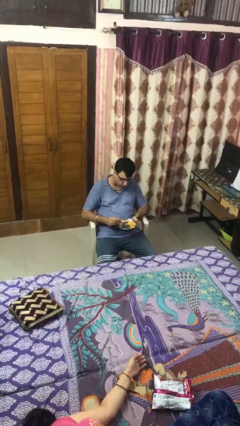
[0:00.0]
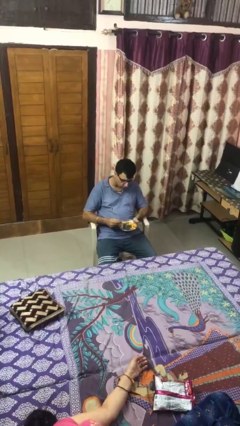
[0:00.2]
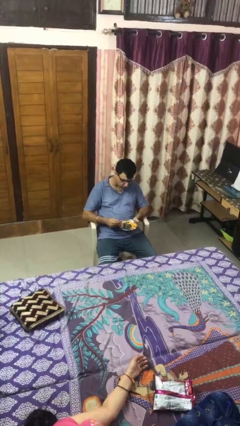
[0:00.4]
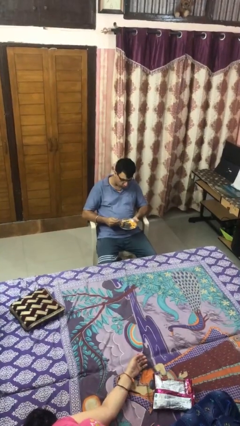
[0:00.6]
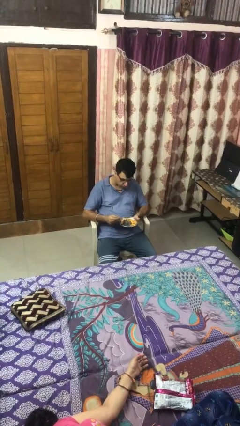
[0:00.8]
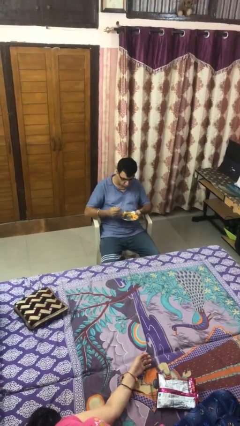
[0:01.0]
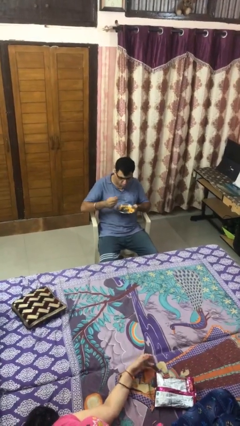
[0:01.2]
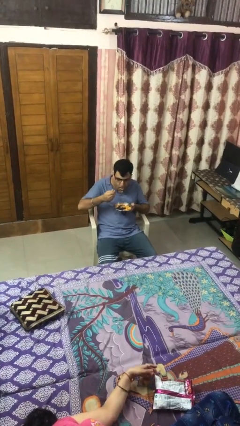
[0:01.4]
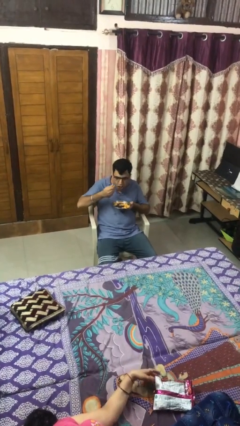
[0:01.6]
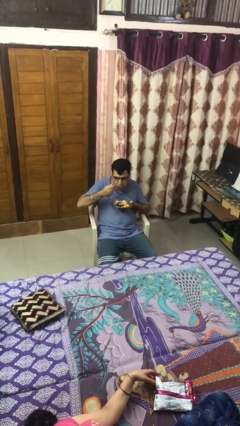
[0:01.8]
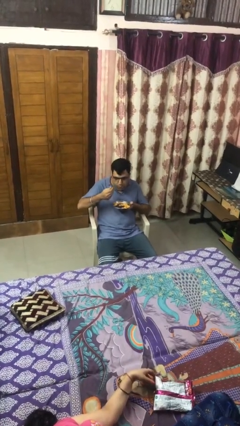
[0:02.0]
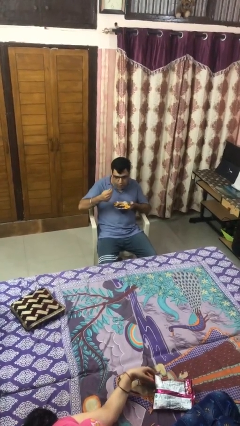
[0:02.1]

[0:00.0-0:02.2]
person eats with utensil

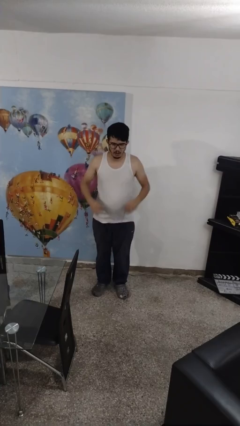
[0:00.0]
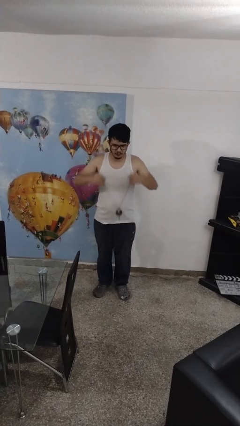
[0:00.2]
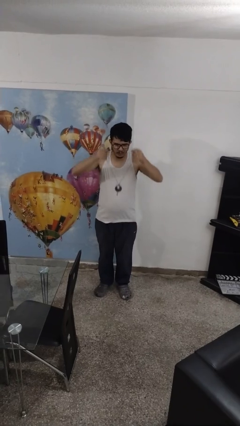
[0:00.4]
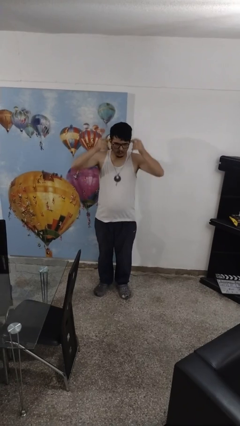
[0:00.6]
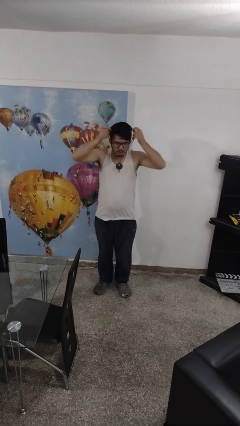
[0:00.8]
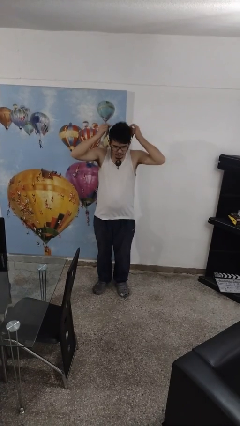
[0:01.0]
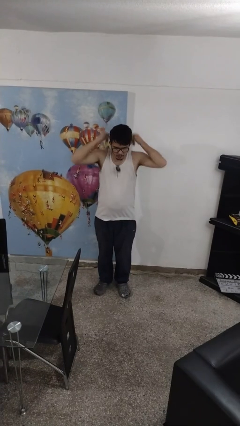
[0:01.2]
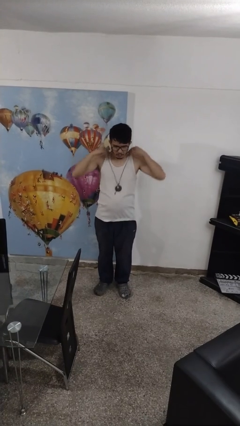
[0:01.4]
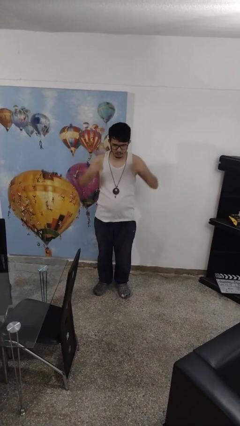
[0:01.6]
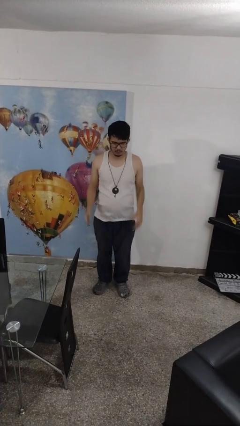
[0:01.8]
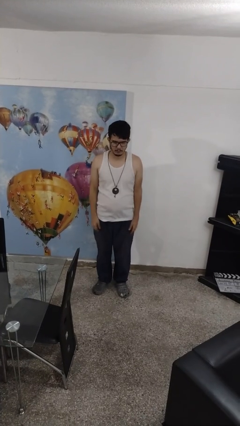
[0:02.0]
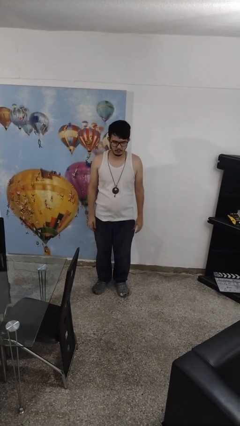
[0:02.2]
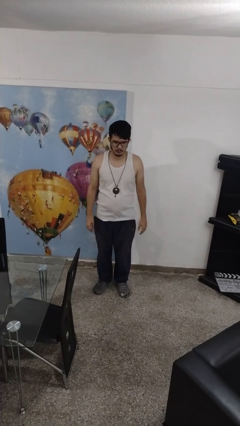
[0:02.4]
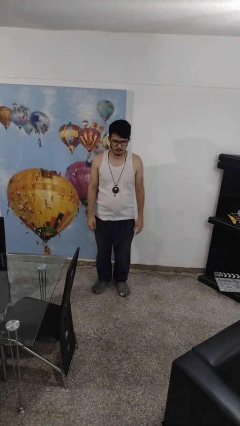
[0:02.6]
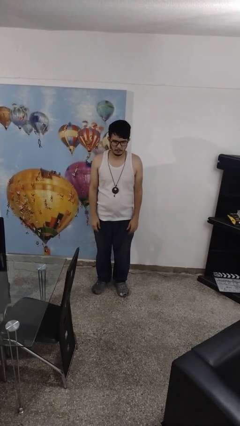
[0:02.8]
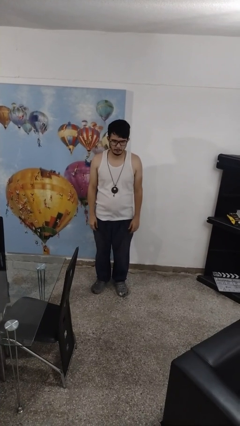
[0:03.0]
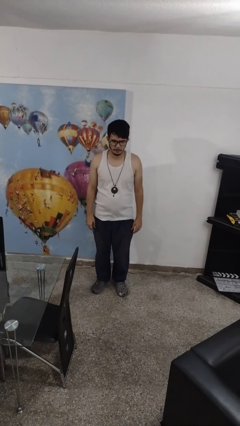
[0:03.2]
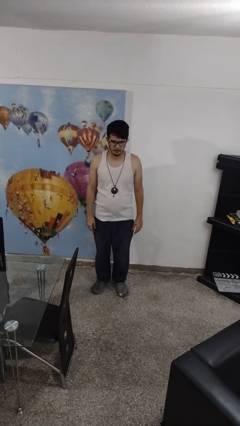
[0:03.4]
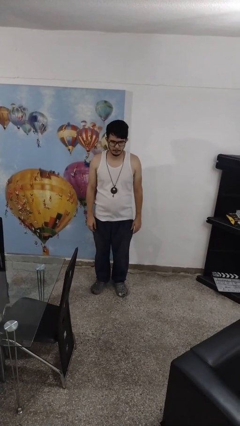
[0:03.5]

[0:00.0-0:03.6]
person puts on necklace

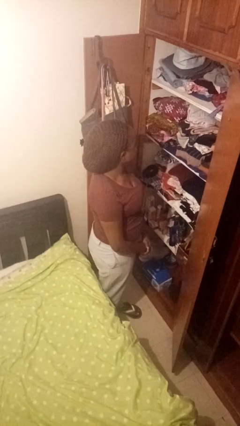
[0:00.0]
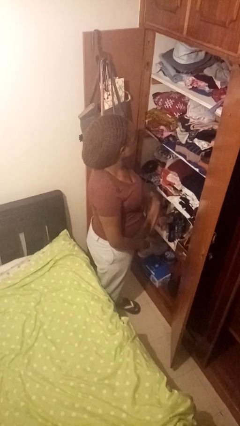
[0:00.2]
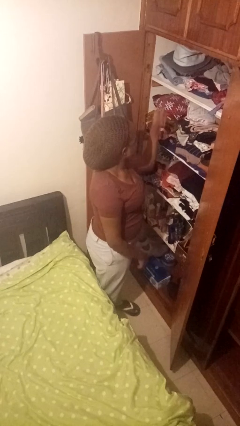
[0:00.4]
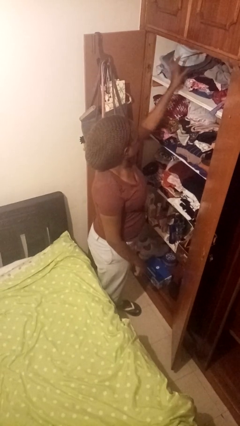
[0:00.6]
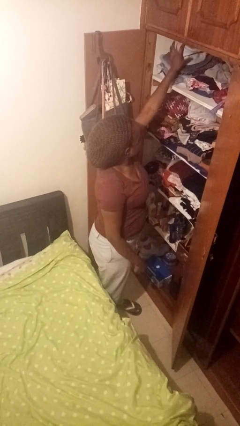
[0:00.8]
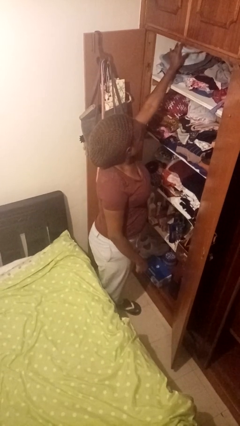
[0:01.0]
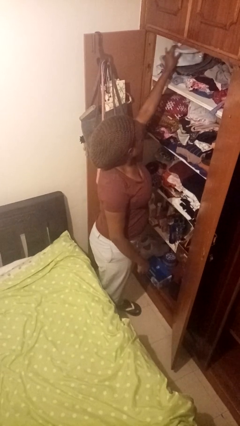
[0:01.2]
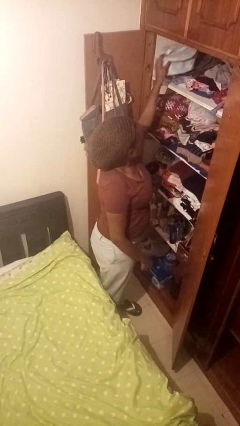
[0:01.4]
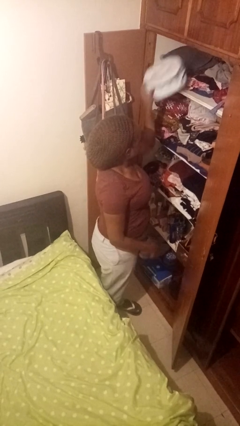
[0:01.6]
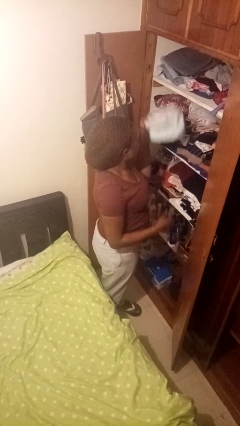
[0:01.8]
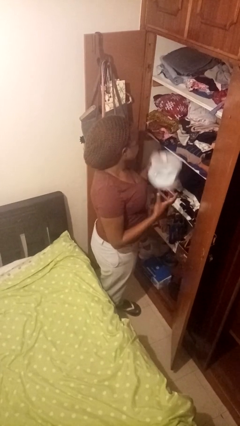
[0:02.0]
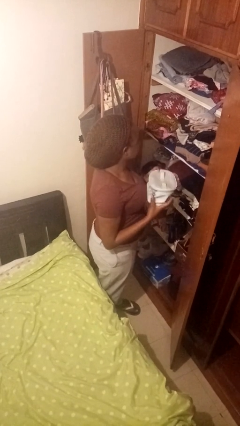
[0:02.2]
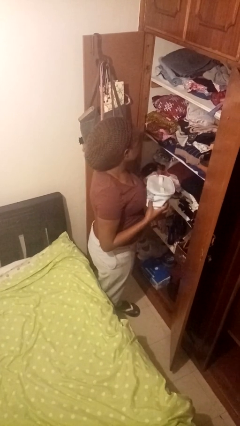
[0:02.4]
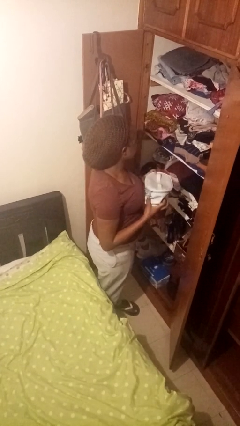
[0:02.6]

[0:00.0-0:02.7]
person picks up object from shelf

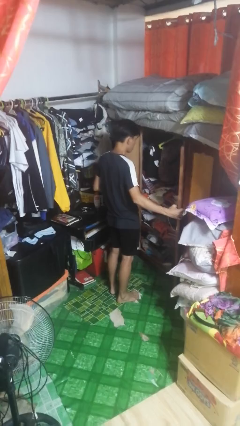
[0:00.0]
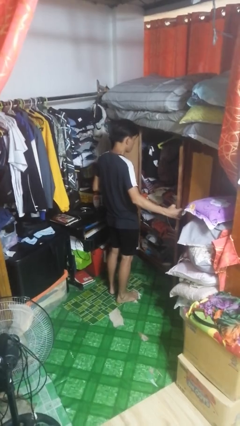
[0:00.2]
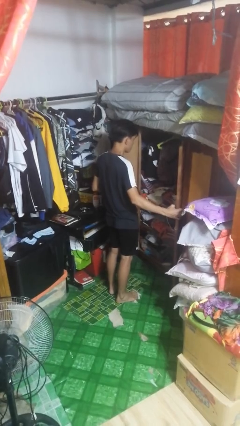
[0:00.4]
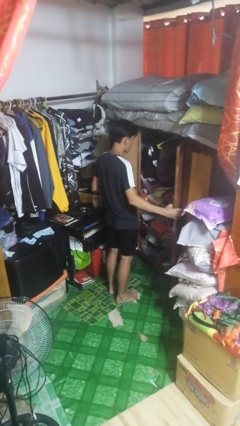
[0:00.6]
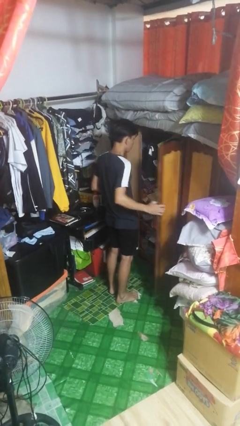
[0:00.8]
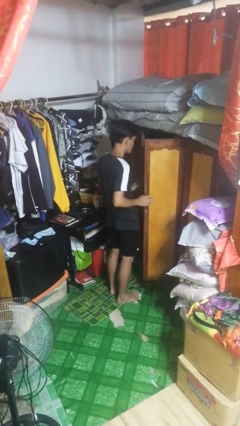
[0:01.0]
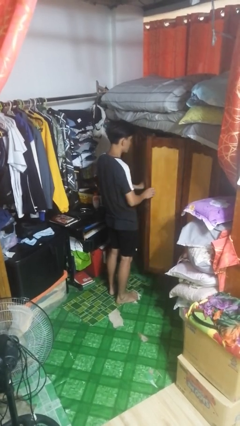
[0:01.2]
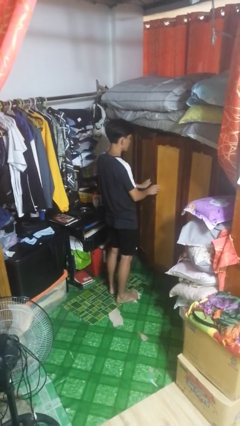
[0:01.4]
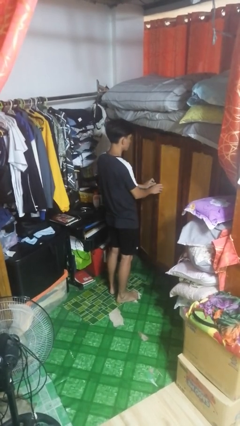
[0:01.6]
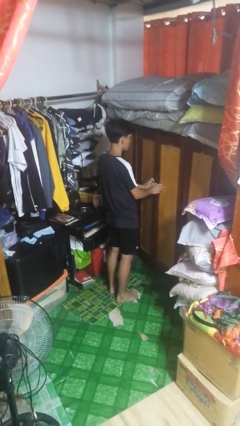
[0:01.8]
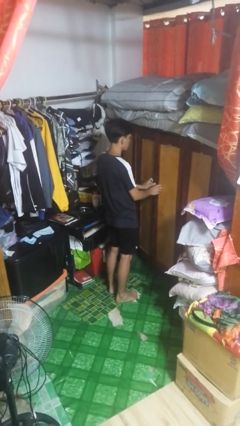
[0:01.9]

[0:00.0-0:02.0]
person closes dresser drawer

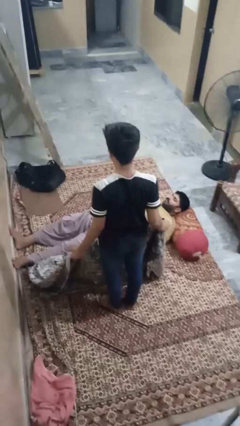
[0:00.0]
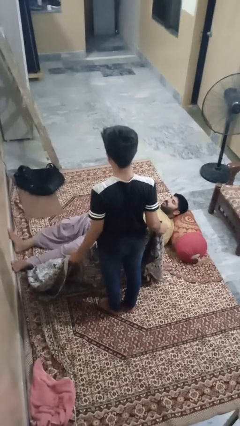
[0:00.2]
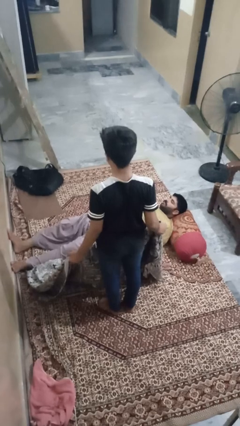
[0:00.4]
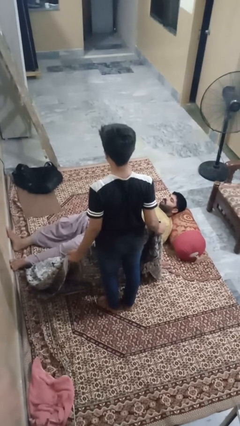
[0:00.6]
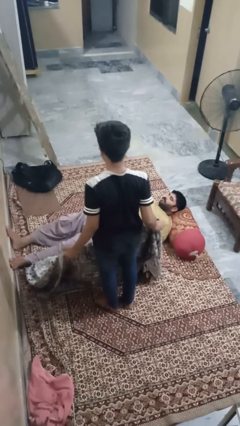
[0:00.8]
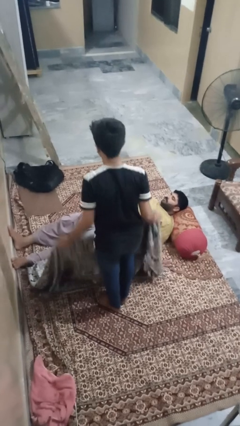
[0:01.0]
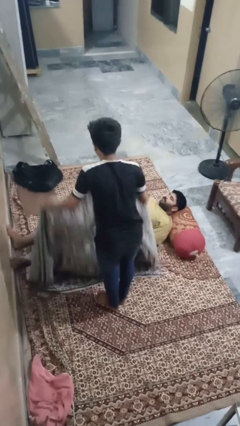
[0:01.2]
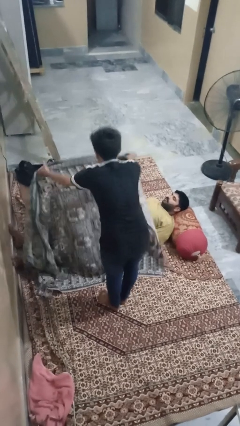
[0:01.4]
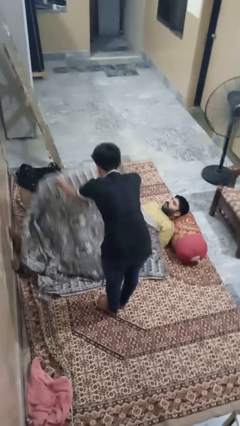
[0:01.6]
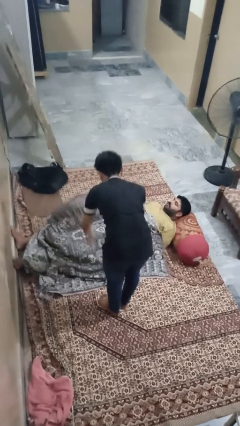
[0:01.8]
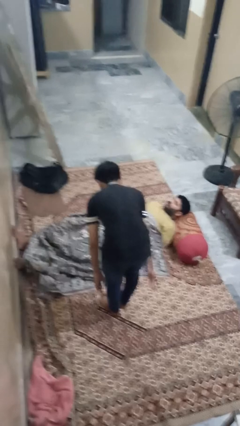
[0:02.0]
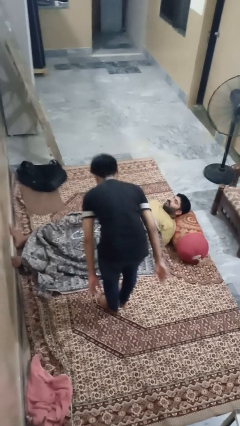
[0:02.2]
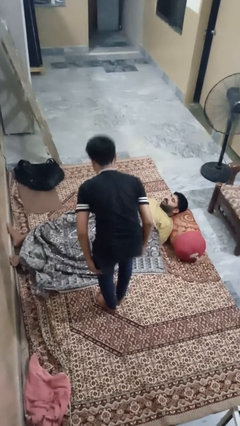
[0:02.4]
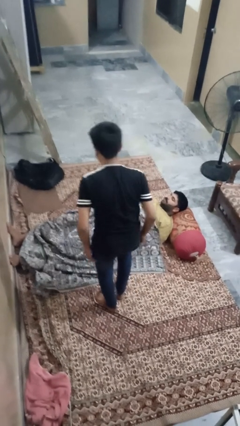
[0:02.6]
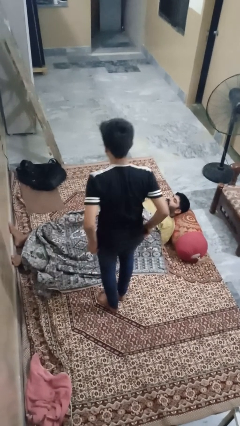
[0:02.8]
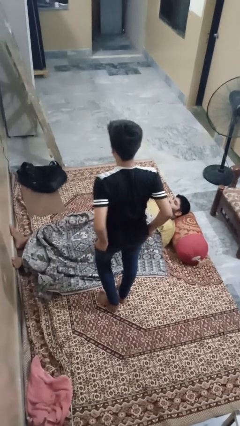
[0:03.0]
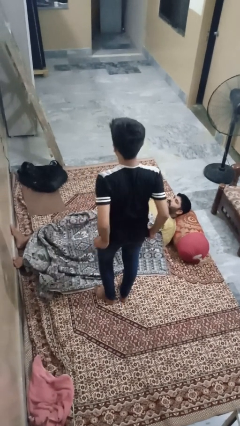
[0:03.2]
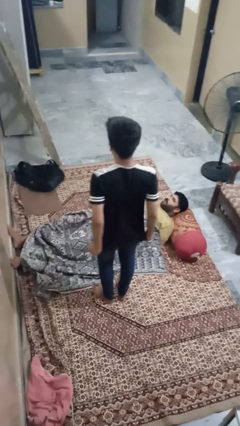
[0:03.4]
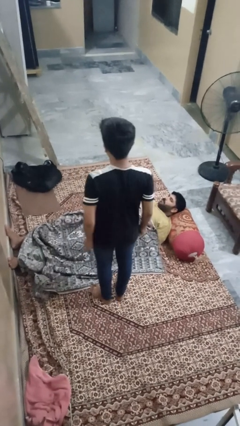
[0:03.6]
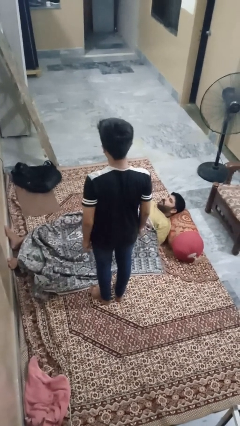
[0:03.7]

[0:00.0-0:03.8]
person covers friend with blanket

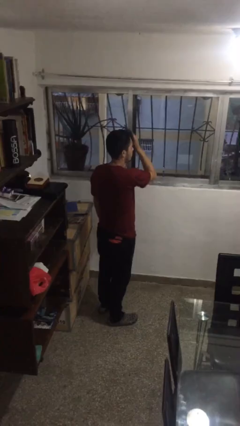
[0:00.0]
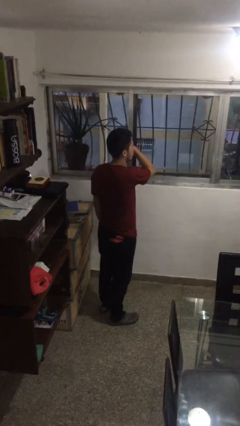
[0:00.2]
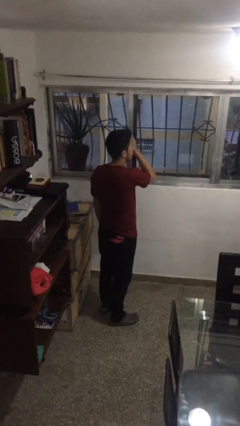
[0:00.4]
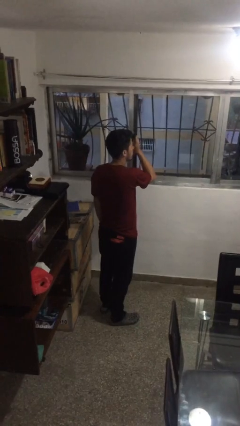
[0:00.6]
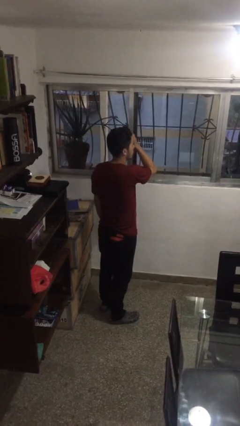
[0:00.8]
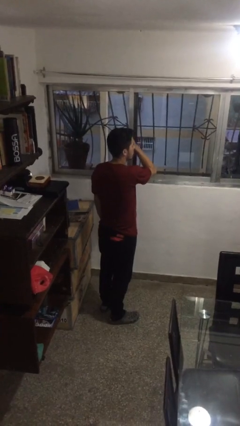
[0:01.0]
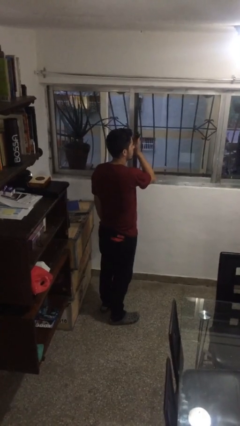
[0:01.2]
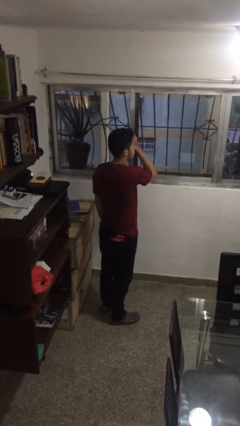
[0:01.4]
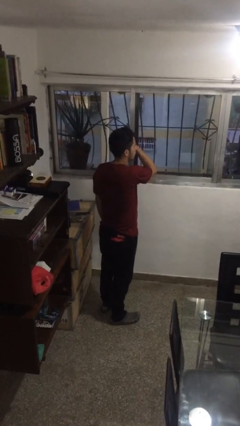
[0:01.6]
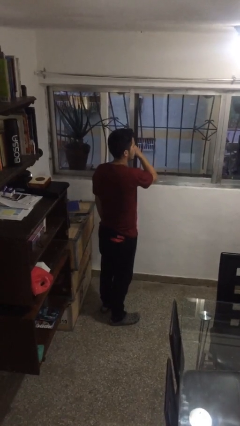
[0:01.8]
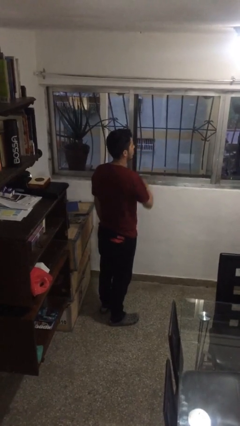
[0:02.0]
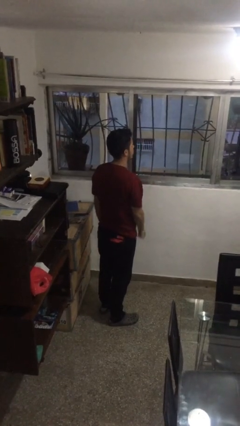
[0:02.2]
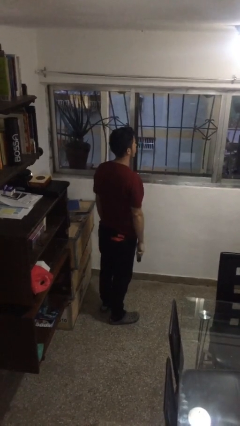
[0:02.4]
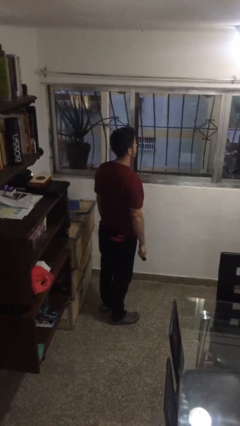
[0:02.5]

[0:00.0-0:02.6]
person brushes hair

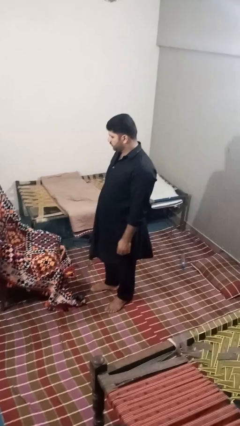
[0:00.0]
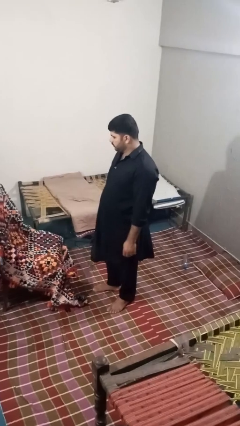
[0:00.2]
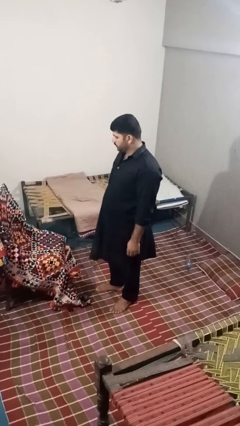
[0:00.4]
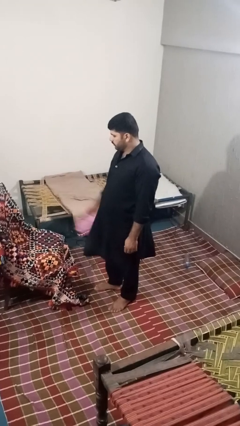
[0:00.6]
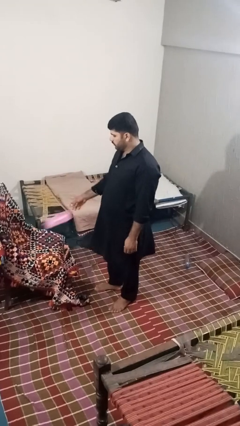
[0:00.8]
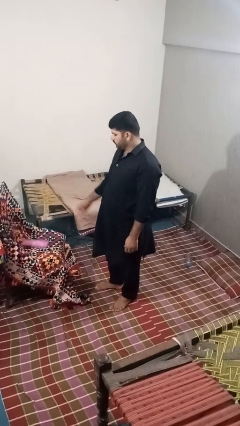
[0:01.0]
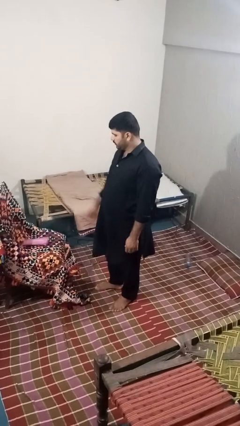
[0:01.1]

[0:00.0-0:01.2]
person puts down object on couch
